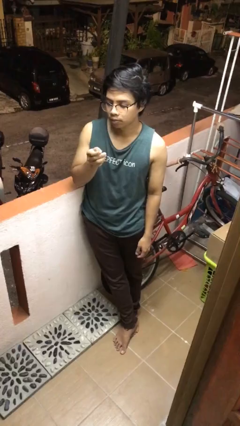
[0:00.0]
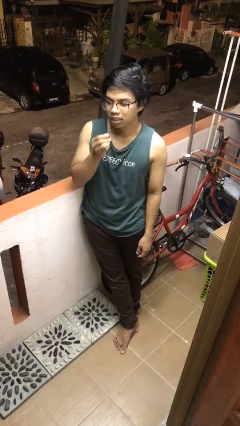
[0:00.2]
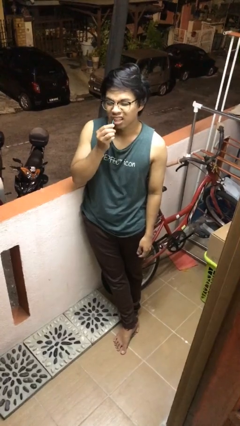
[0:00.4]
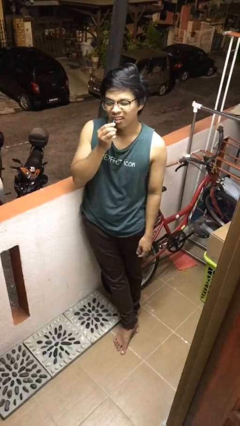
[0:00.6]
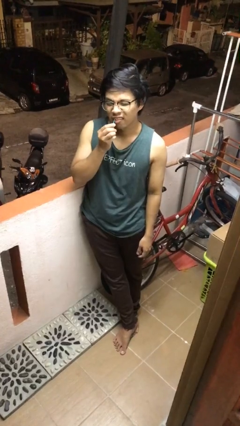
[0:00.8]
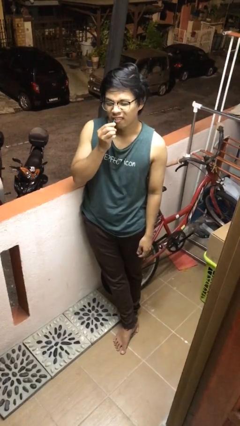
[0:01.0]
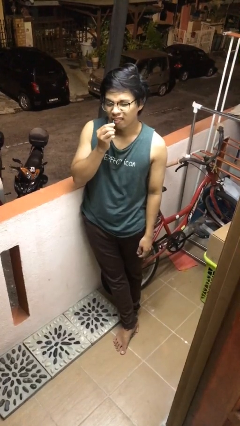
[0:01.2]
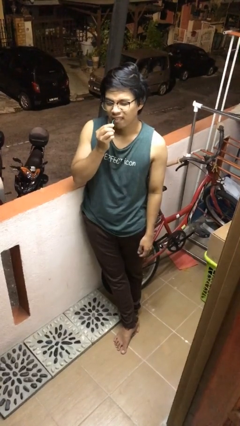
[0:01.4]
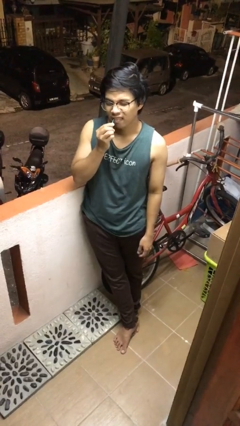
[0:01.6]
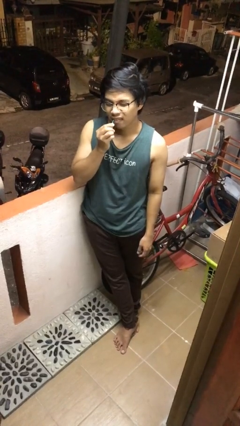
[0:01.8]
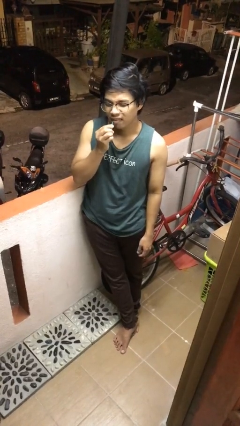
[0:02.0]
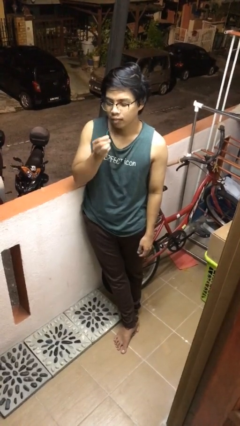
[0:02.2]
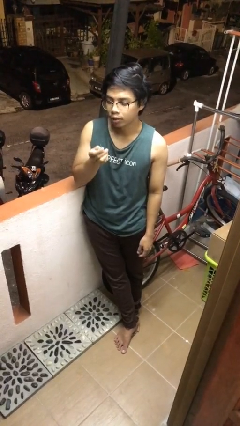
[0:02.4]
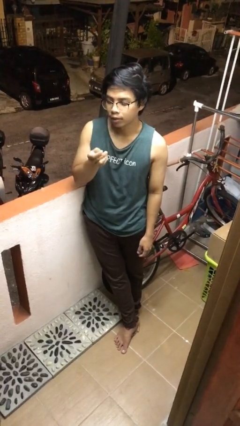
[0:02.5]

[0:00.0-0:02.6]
person flosses

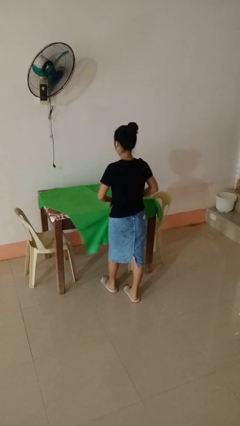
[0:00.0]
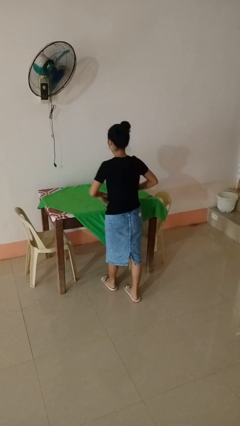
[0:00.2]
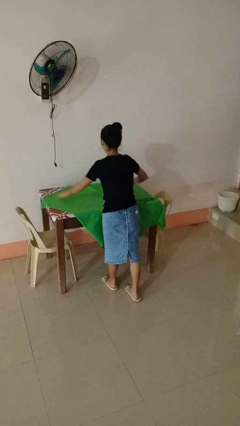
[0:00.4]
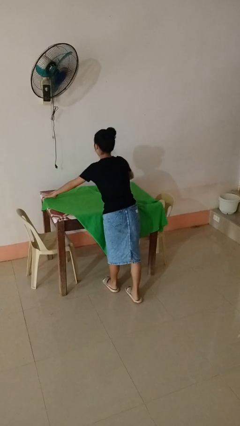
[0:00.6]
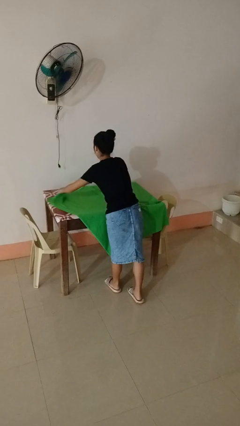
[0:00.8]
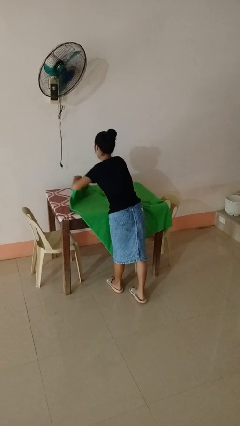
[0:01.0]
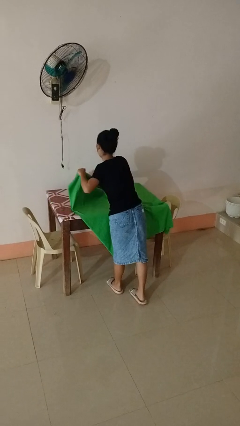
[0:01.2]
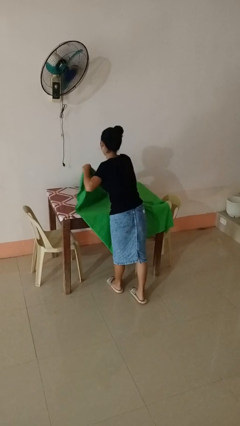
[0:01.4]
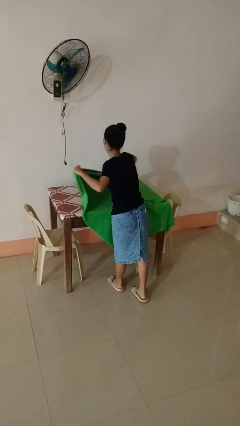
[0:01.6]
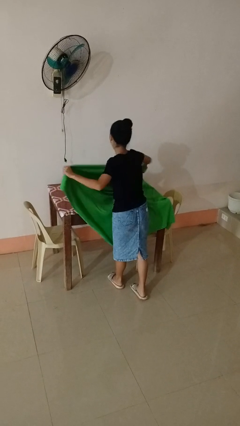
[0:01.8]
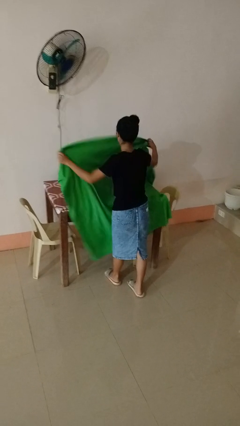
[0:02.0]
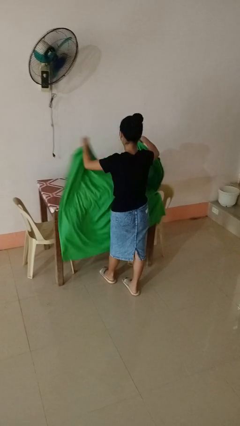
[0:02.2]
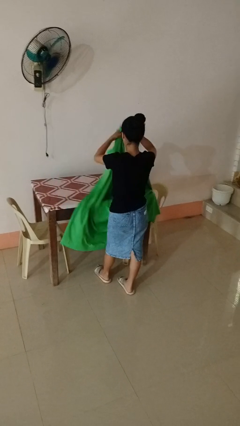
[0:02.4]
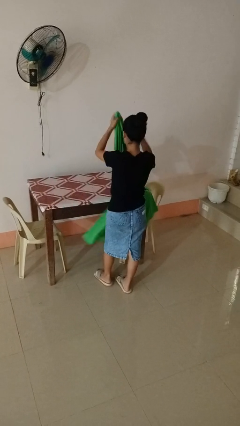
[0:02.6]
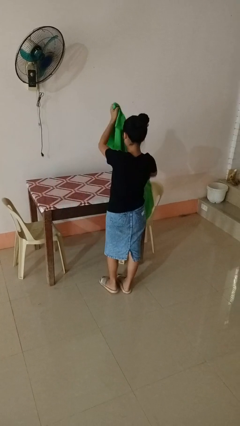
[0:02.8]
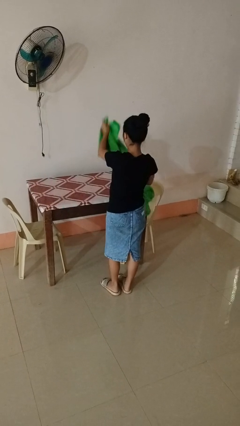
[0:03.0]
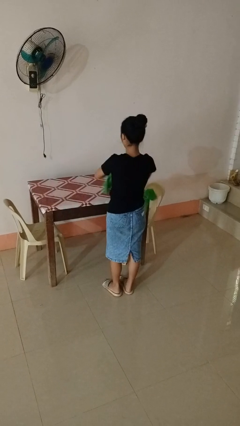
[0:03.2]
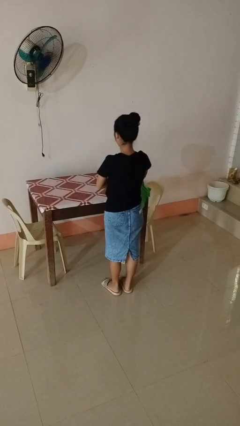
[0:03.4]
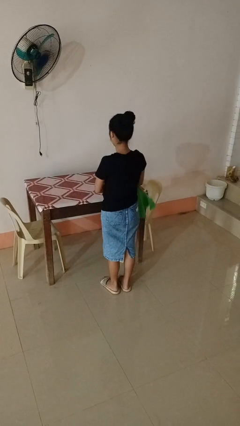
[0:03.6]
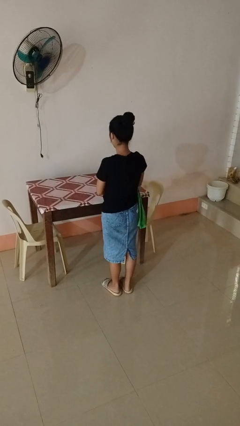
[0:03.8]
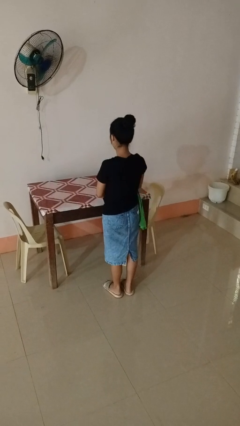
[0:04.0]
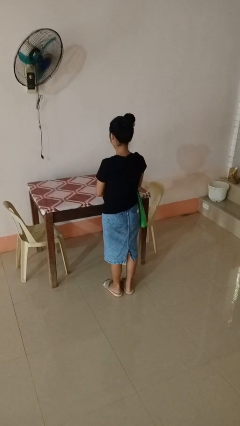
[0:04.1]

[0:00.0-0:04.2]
person folds tablecloth

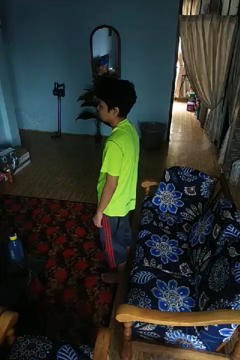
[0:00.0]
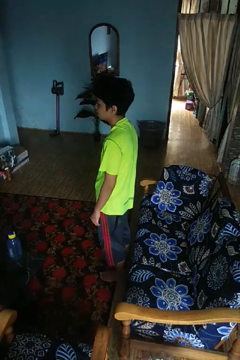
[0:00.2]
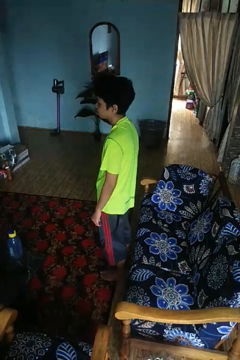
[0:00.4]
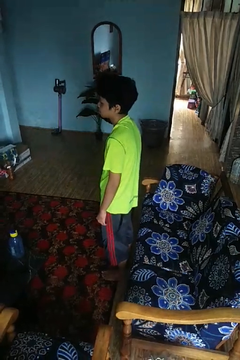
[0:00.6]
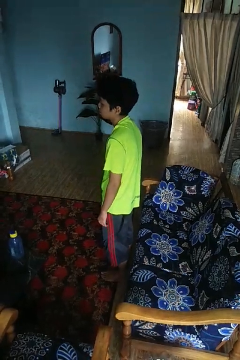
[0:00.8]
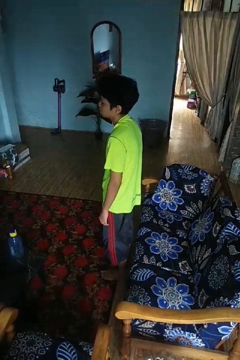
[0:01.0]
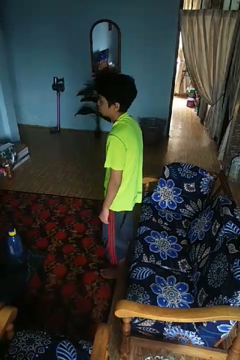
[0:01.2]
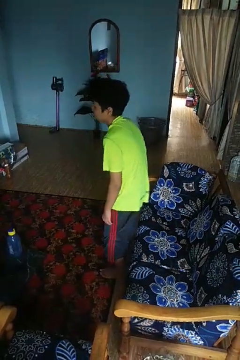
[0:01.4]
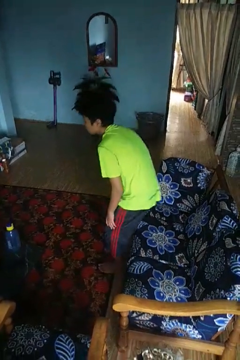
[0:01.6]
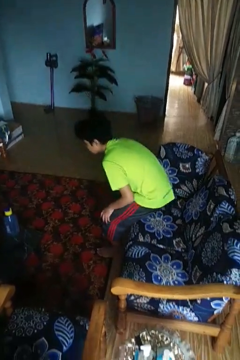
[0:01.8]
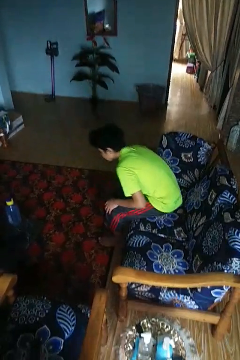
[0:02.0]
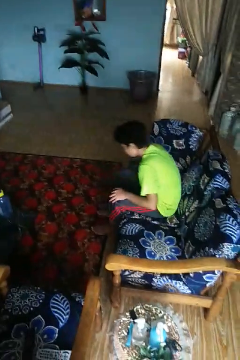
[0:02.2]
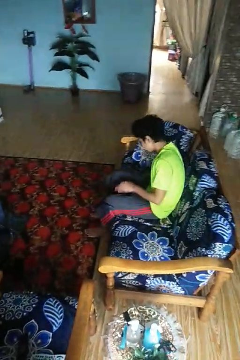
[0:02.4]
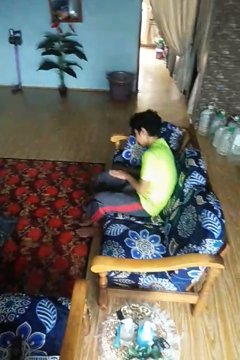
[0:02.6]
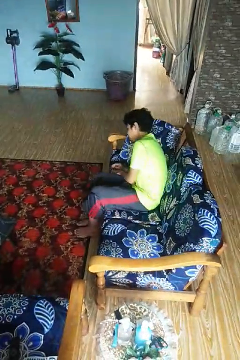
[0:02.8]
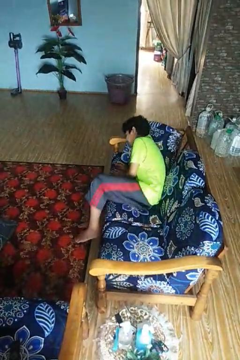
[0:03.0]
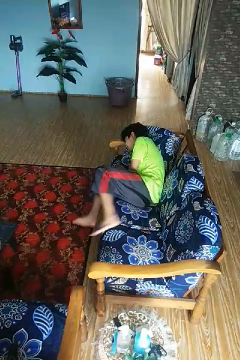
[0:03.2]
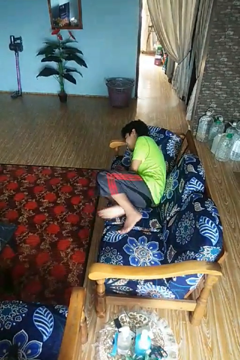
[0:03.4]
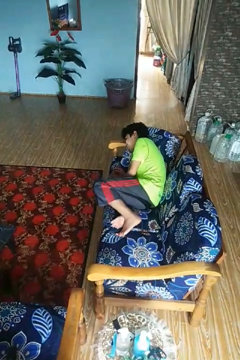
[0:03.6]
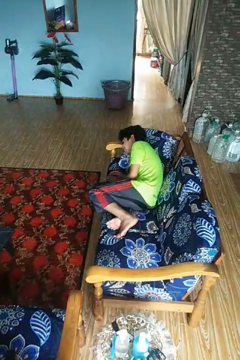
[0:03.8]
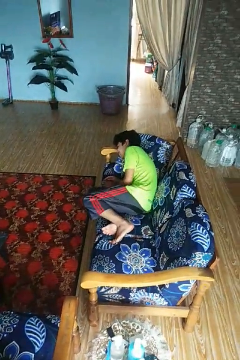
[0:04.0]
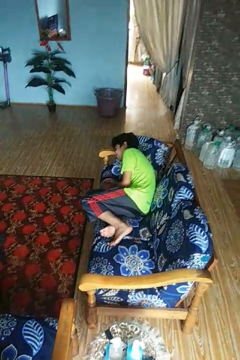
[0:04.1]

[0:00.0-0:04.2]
person lies down on couch

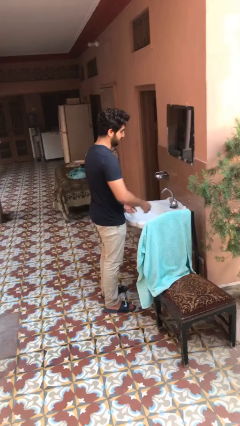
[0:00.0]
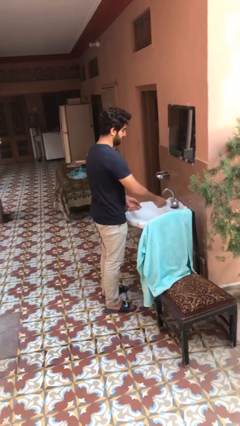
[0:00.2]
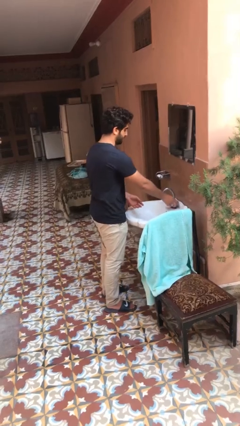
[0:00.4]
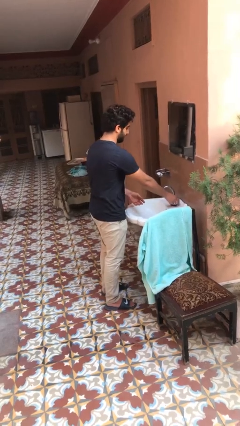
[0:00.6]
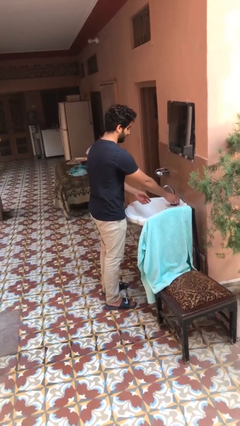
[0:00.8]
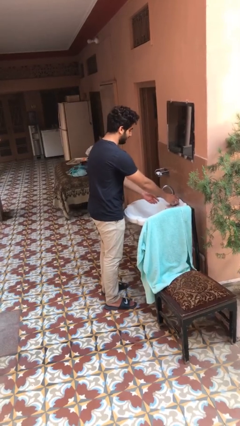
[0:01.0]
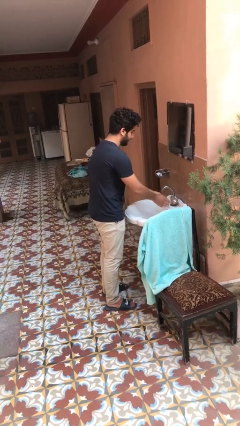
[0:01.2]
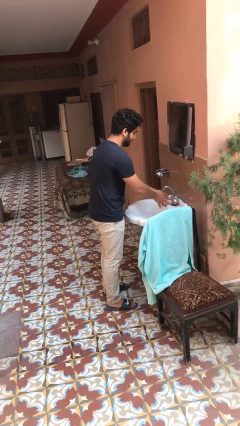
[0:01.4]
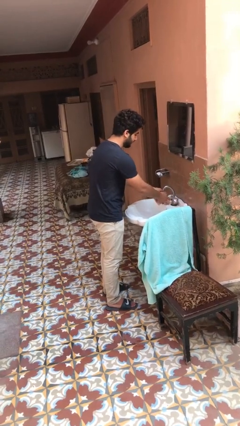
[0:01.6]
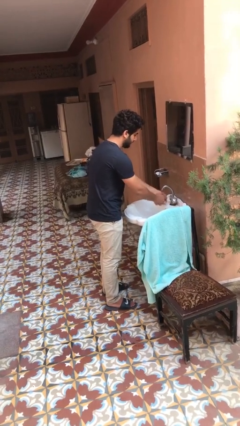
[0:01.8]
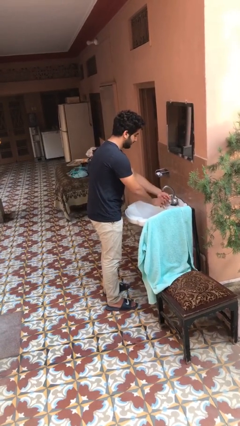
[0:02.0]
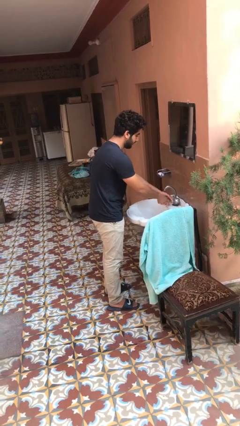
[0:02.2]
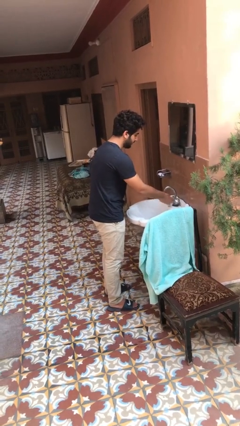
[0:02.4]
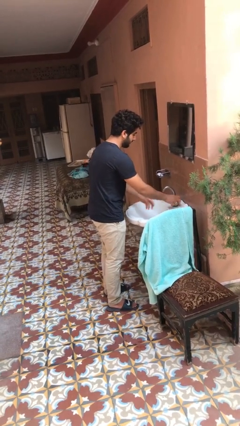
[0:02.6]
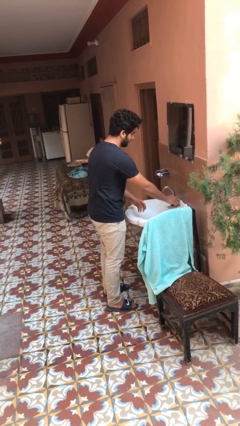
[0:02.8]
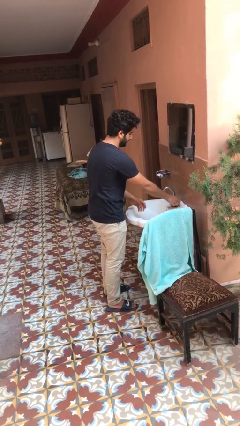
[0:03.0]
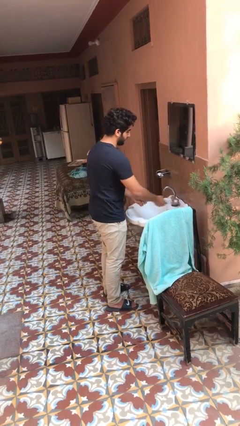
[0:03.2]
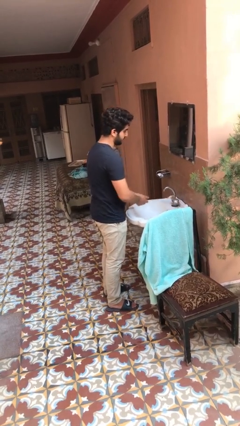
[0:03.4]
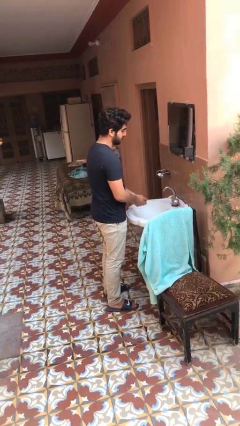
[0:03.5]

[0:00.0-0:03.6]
person washes hands

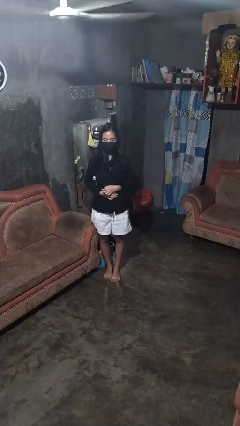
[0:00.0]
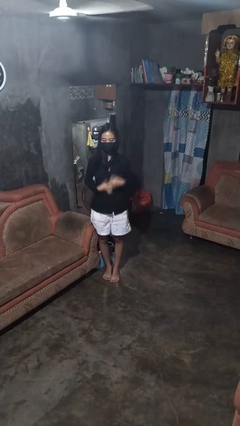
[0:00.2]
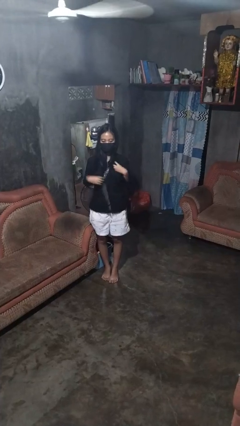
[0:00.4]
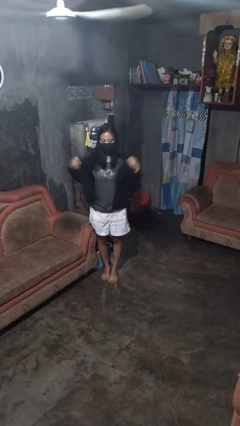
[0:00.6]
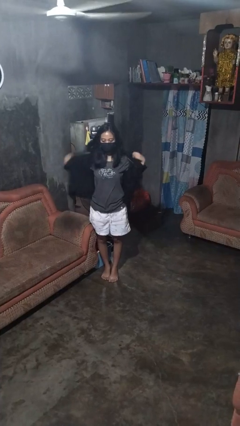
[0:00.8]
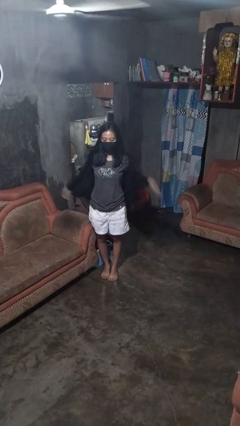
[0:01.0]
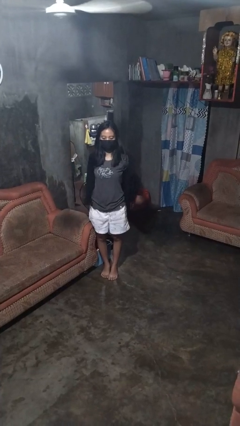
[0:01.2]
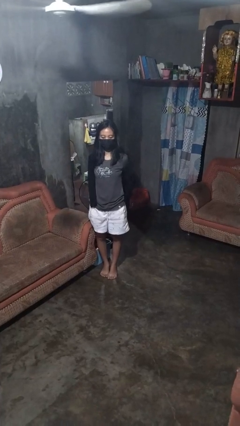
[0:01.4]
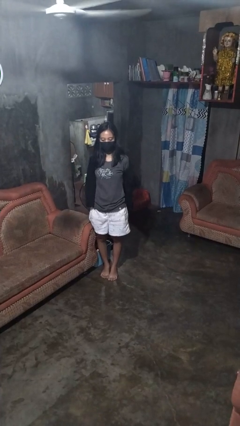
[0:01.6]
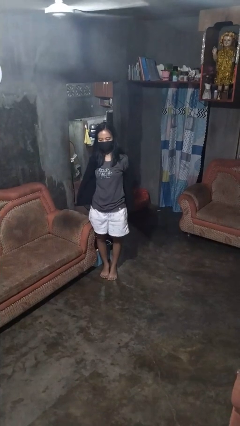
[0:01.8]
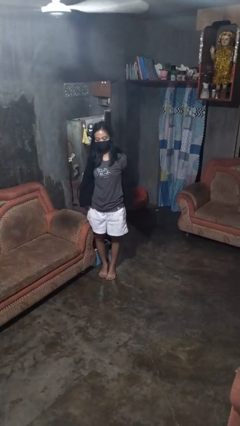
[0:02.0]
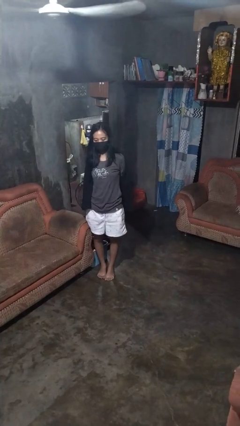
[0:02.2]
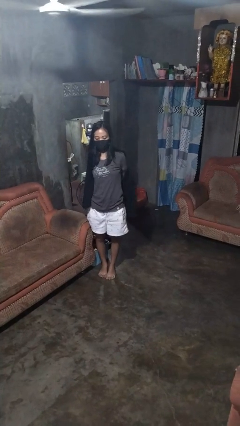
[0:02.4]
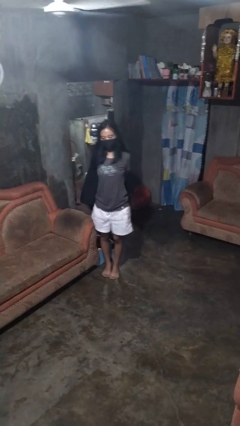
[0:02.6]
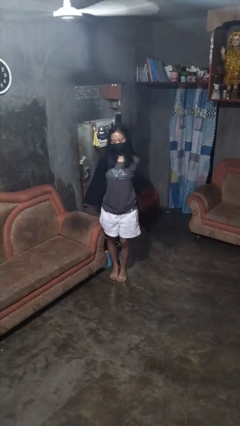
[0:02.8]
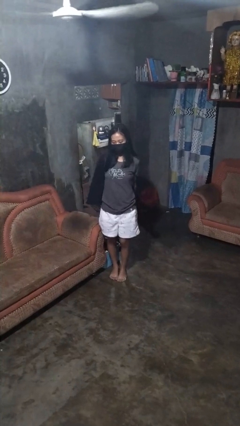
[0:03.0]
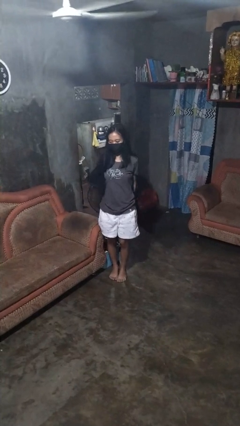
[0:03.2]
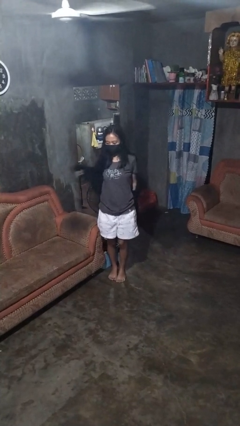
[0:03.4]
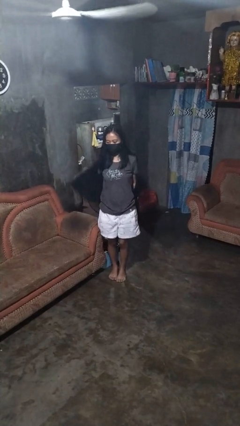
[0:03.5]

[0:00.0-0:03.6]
person takes off shirt

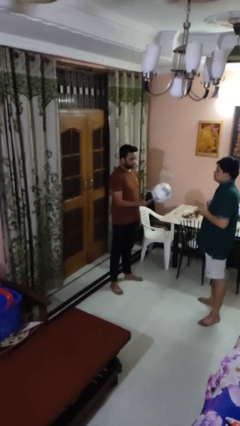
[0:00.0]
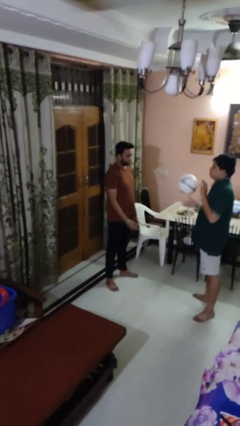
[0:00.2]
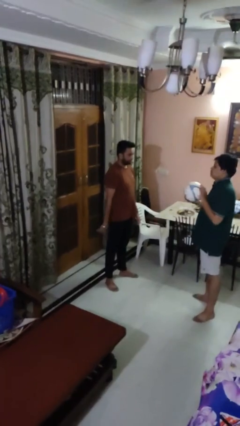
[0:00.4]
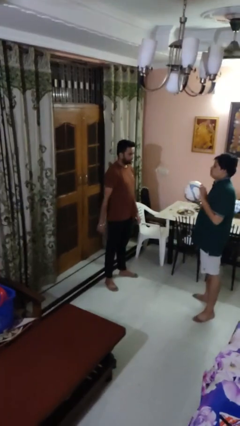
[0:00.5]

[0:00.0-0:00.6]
person throws object to person
